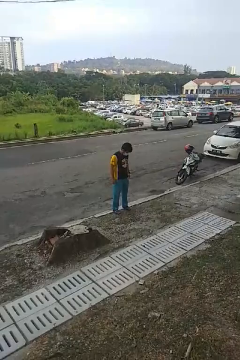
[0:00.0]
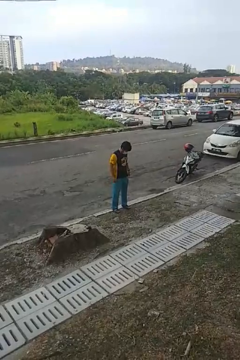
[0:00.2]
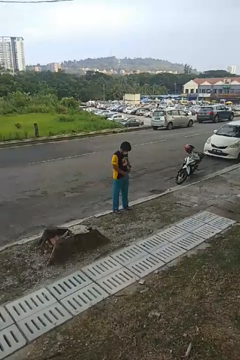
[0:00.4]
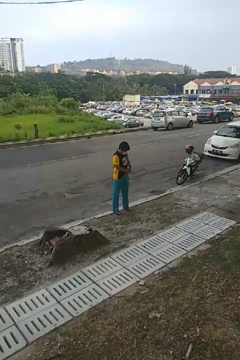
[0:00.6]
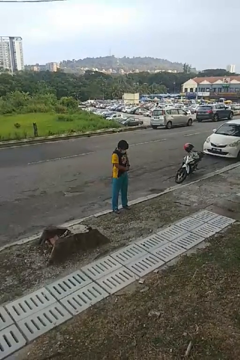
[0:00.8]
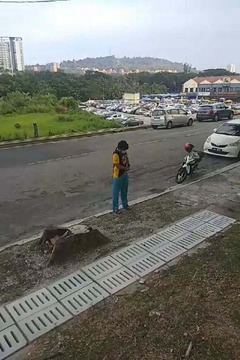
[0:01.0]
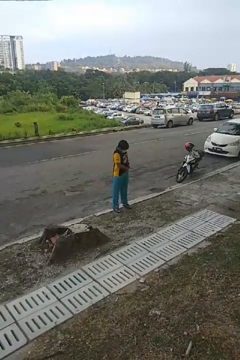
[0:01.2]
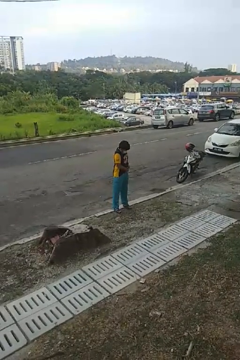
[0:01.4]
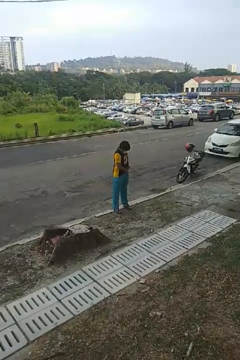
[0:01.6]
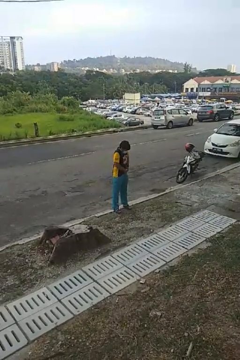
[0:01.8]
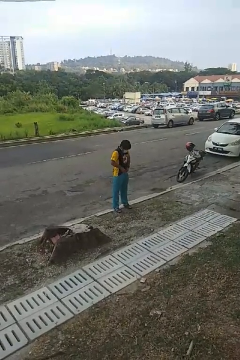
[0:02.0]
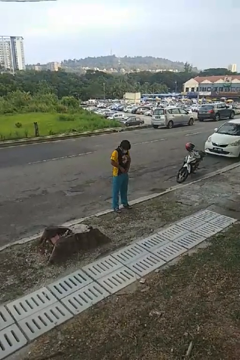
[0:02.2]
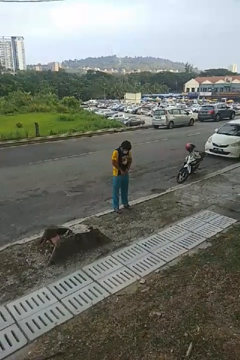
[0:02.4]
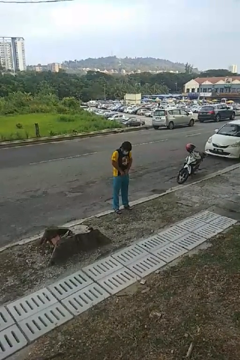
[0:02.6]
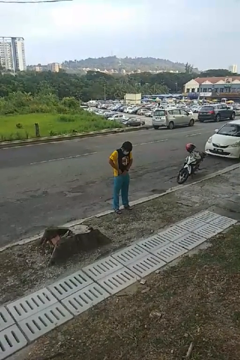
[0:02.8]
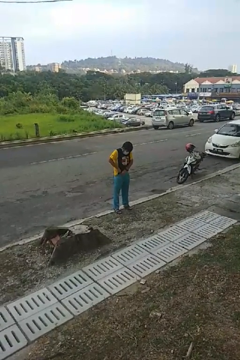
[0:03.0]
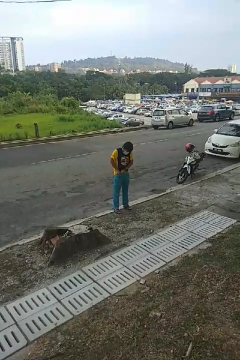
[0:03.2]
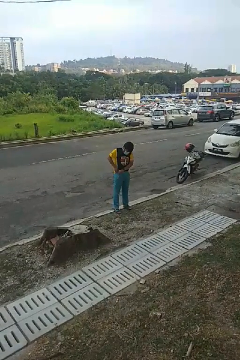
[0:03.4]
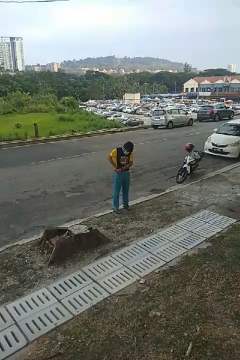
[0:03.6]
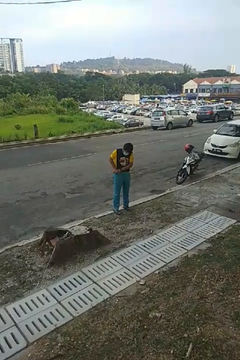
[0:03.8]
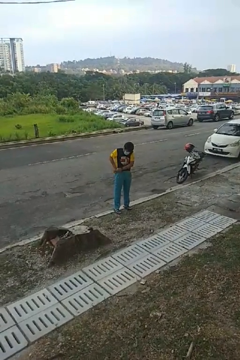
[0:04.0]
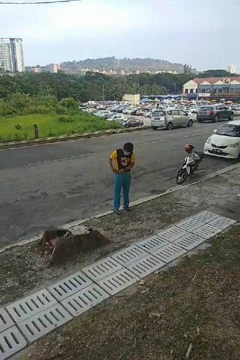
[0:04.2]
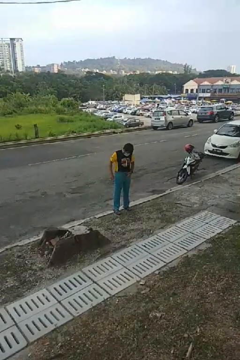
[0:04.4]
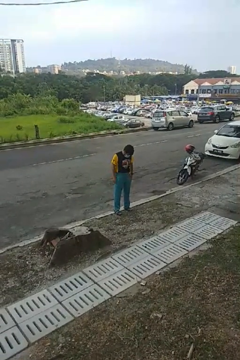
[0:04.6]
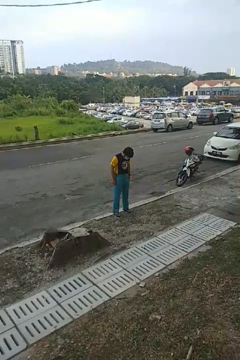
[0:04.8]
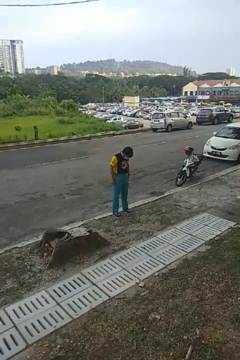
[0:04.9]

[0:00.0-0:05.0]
person tucks in shirt

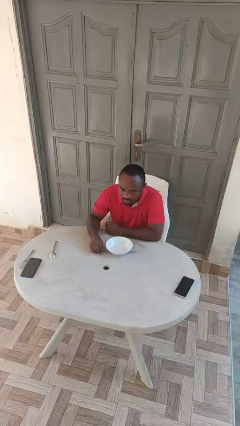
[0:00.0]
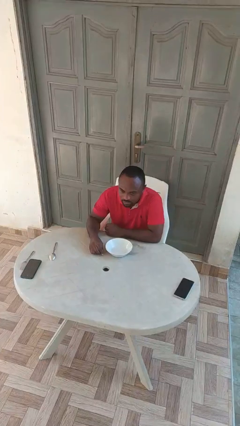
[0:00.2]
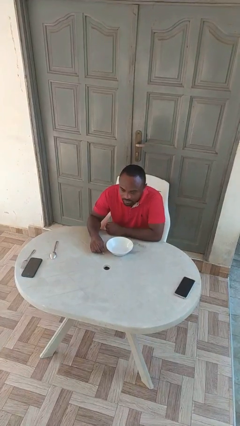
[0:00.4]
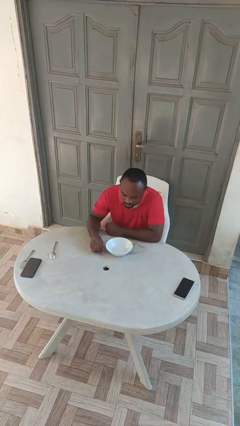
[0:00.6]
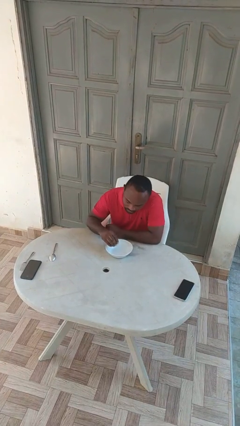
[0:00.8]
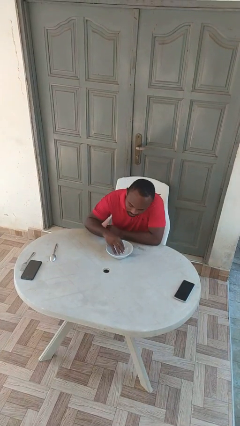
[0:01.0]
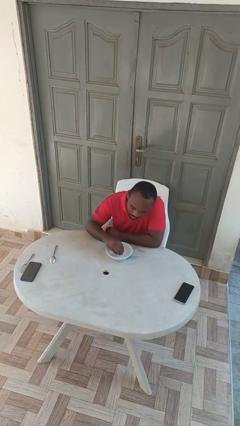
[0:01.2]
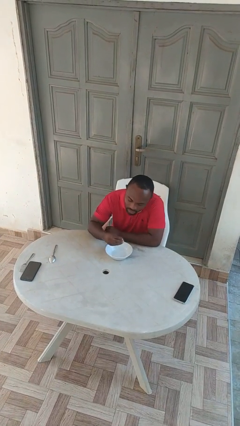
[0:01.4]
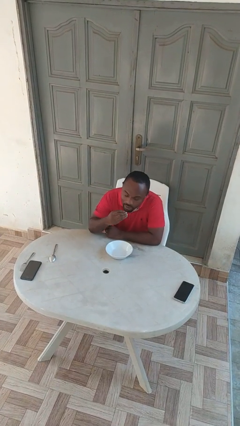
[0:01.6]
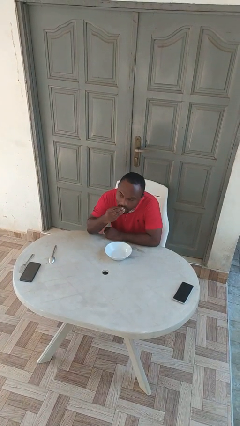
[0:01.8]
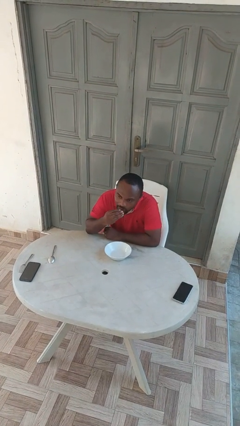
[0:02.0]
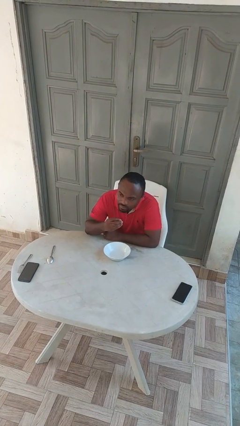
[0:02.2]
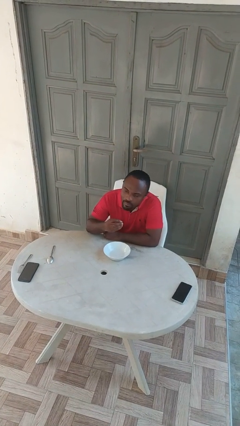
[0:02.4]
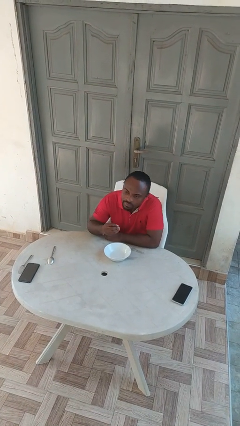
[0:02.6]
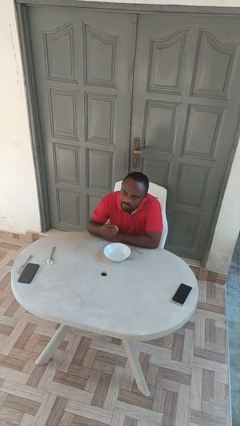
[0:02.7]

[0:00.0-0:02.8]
person eats with hands

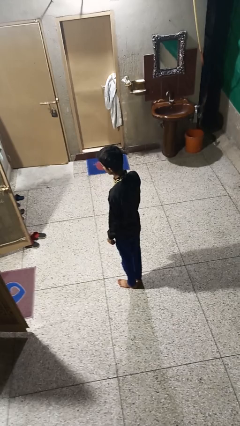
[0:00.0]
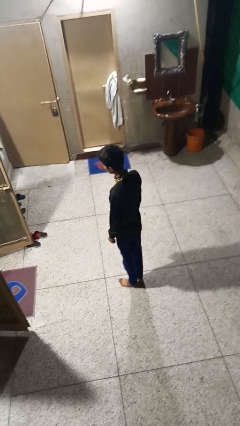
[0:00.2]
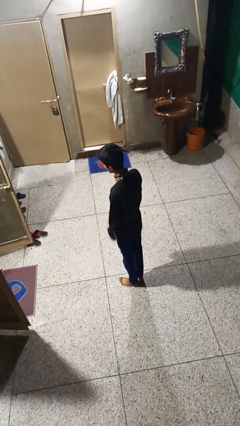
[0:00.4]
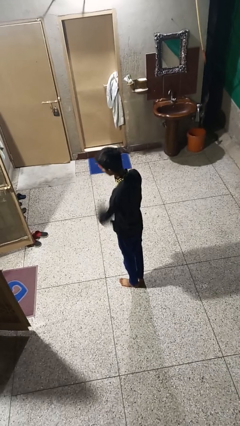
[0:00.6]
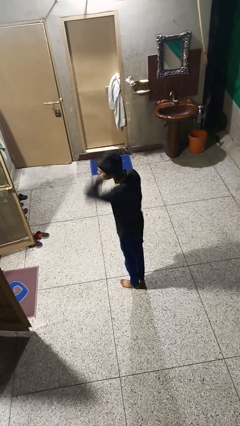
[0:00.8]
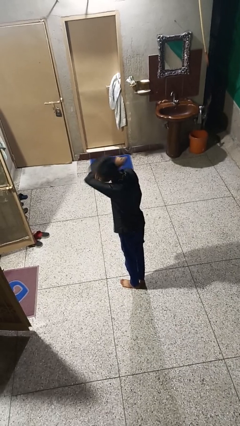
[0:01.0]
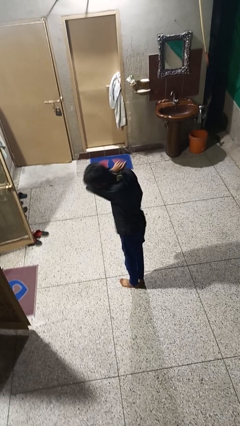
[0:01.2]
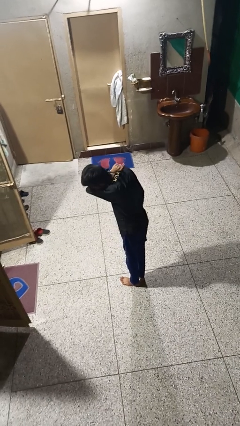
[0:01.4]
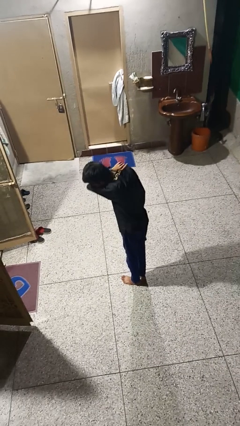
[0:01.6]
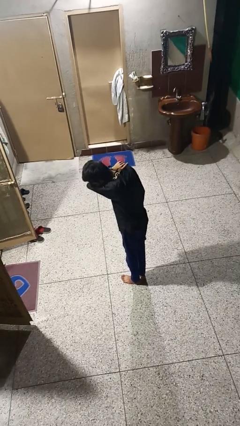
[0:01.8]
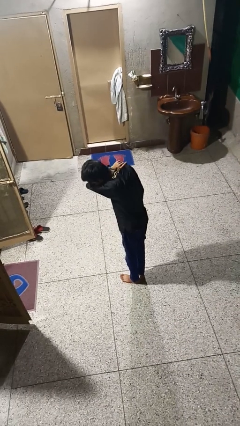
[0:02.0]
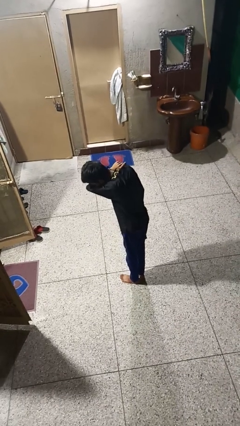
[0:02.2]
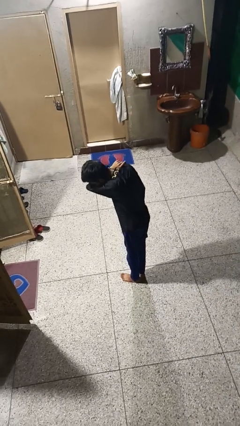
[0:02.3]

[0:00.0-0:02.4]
person sneezes into arm

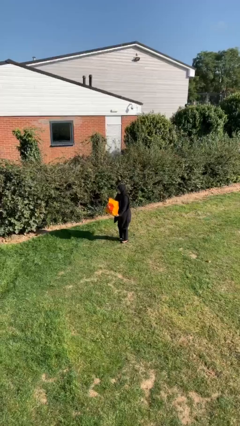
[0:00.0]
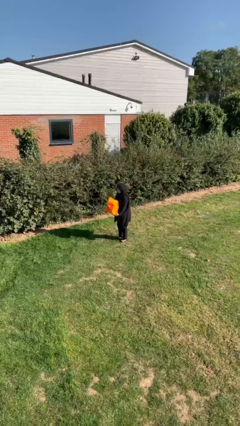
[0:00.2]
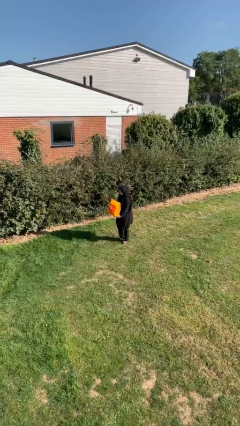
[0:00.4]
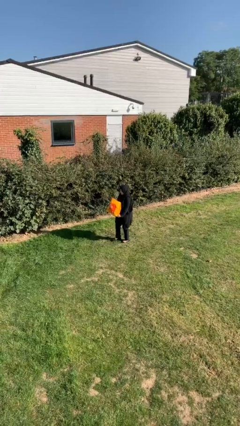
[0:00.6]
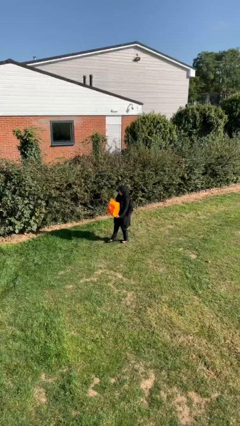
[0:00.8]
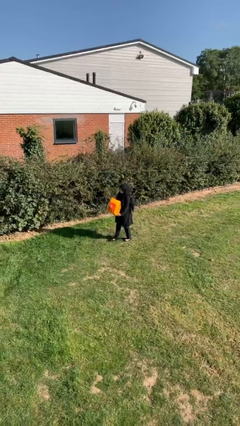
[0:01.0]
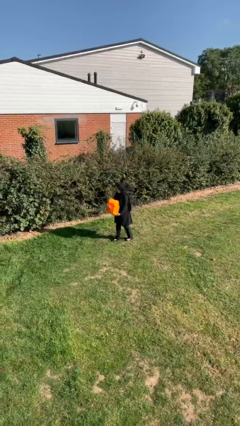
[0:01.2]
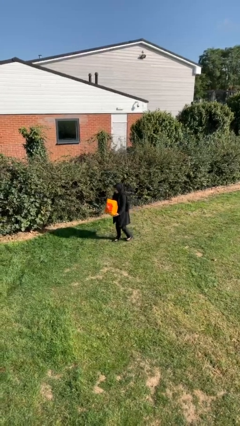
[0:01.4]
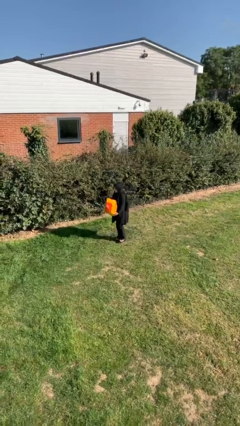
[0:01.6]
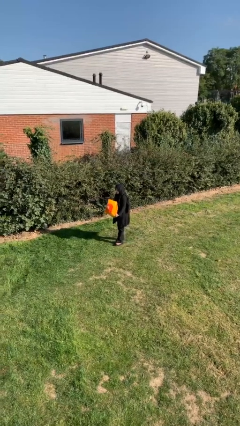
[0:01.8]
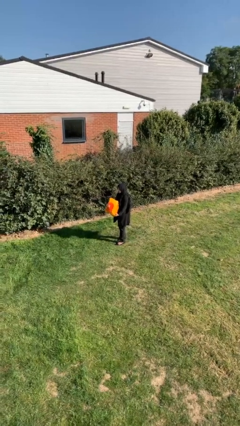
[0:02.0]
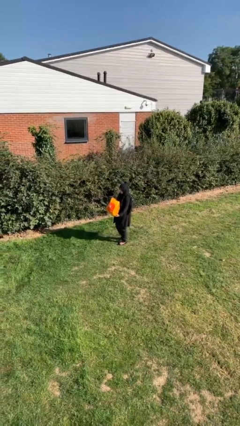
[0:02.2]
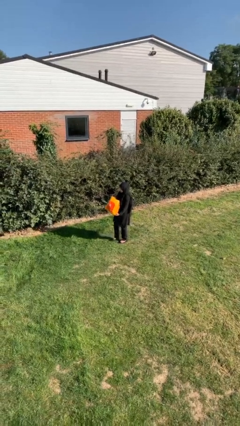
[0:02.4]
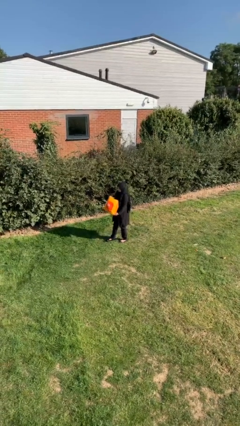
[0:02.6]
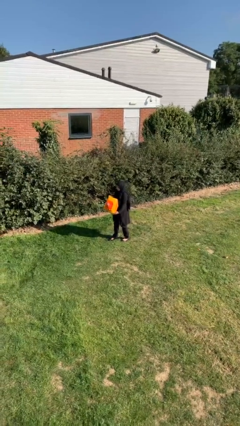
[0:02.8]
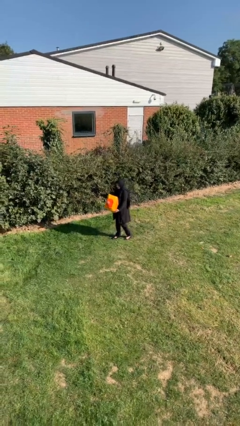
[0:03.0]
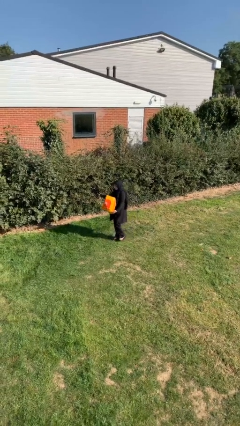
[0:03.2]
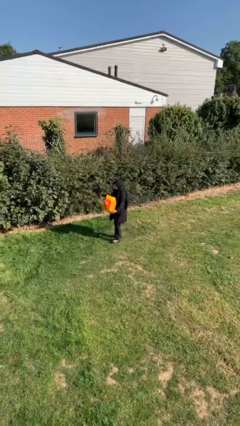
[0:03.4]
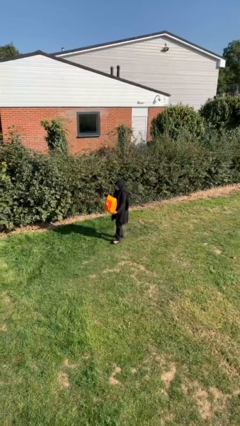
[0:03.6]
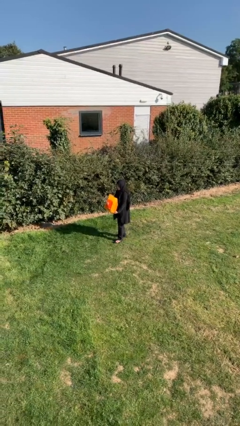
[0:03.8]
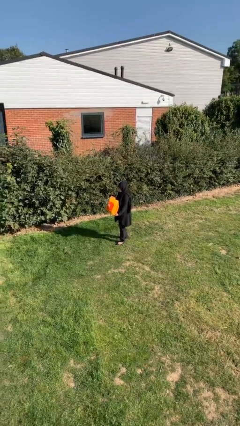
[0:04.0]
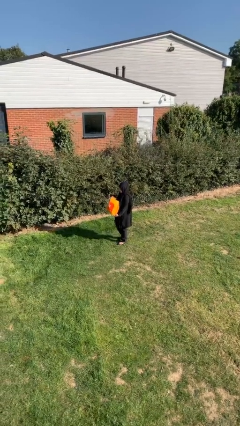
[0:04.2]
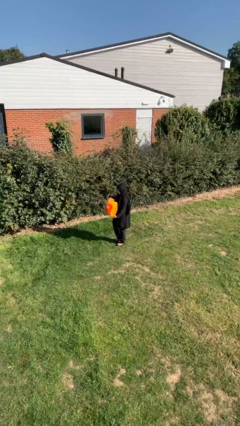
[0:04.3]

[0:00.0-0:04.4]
person carries heavy object

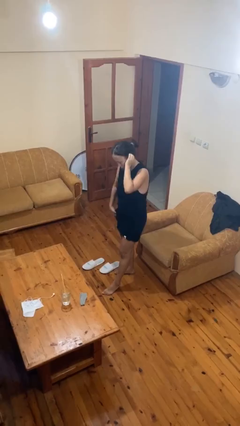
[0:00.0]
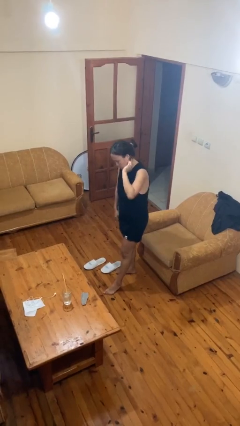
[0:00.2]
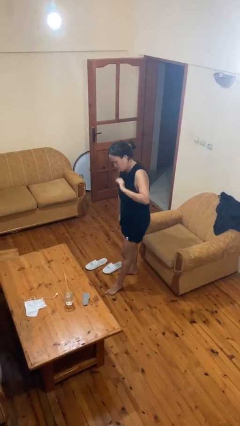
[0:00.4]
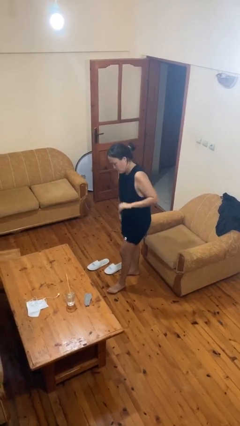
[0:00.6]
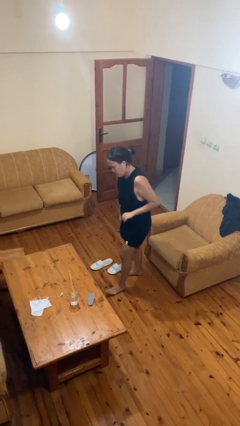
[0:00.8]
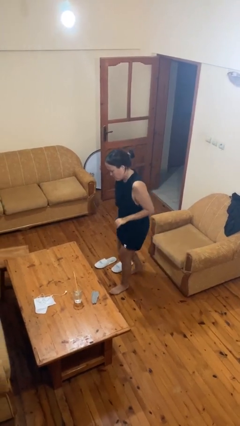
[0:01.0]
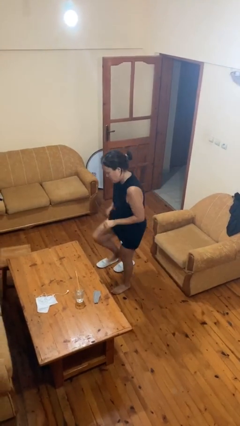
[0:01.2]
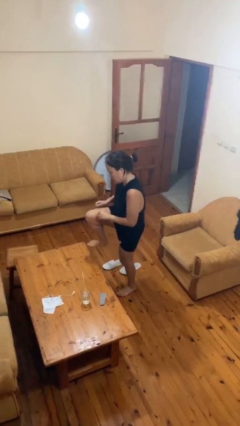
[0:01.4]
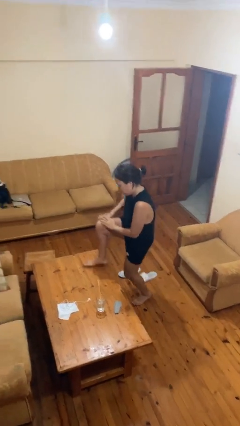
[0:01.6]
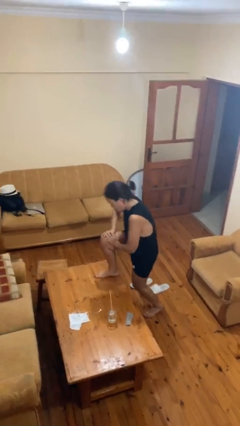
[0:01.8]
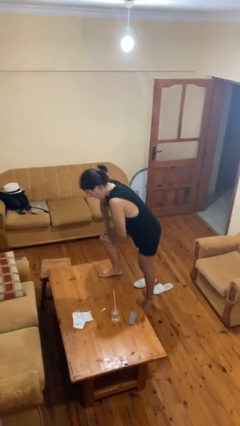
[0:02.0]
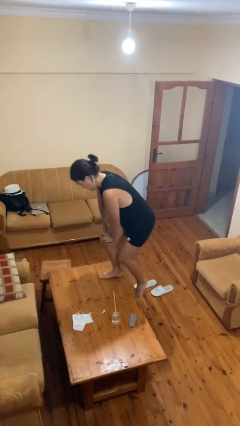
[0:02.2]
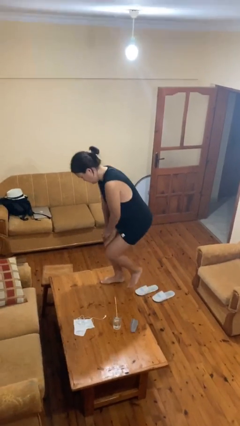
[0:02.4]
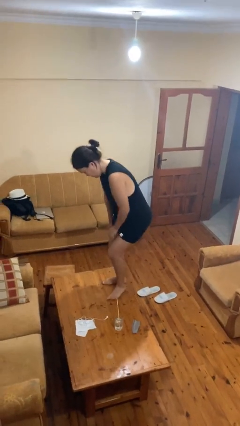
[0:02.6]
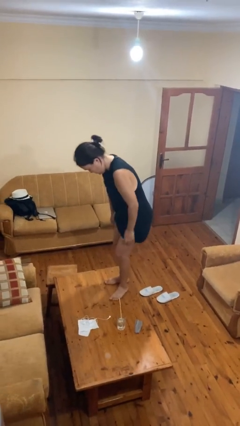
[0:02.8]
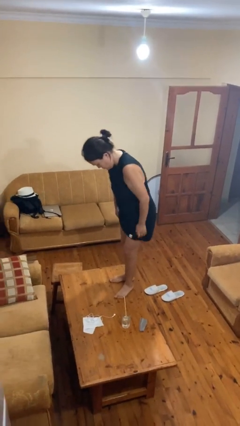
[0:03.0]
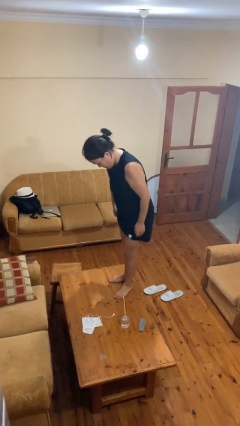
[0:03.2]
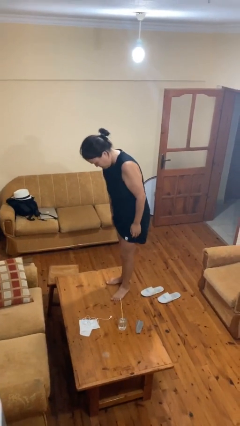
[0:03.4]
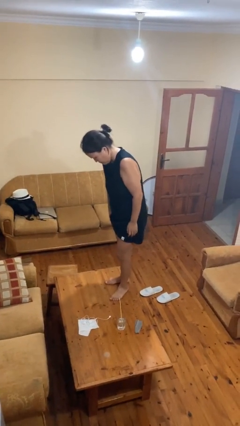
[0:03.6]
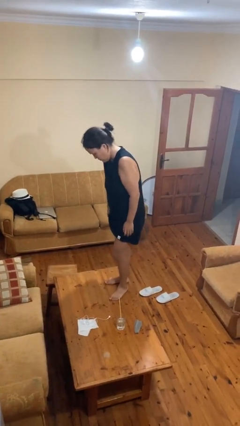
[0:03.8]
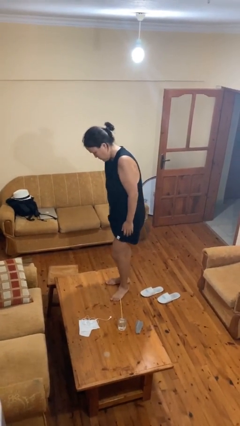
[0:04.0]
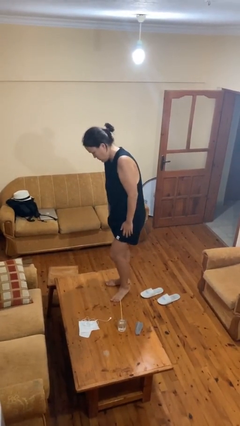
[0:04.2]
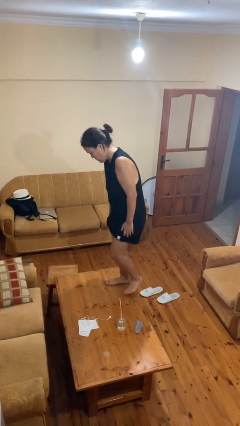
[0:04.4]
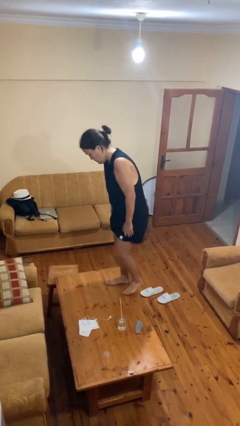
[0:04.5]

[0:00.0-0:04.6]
person climbs on table
